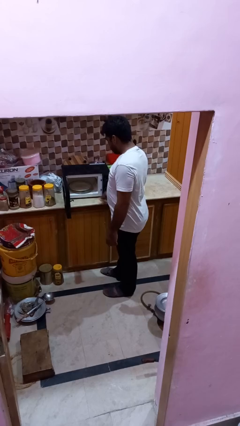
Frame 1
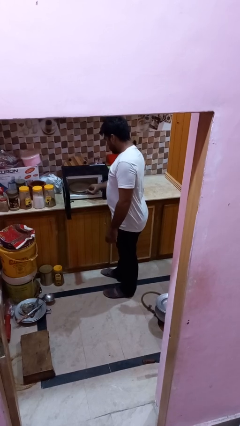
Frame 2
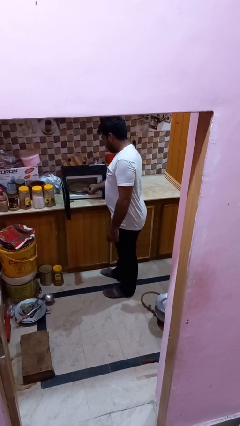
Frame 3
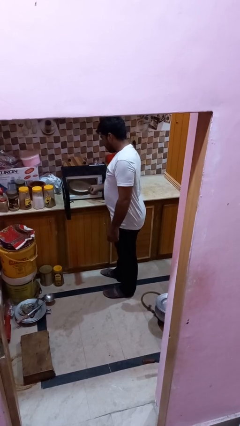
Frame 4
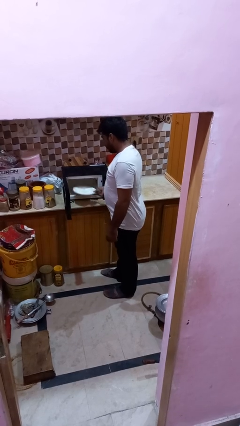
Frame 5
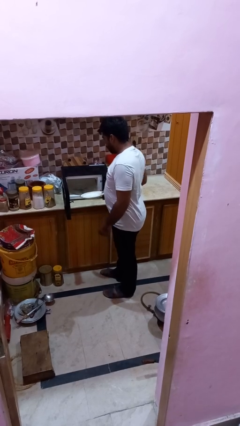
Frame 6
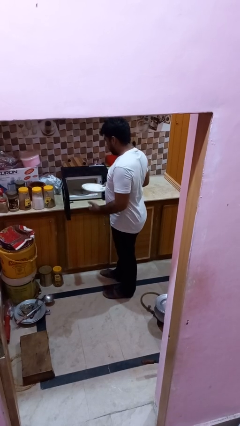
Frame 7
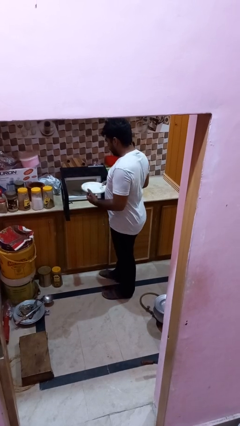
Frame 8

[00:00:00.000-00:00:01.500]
person takes object from oven

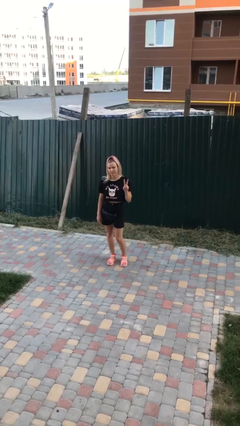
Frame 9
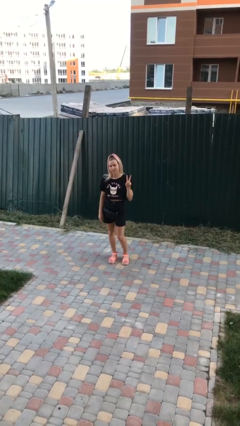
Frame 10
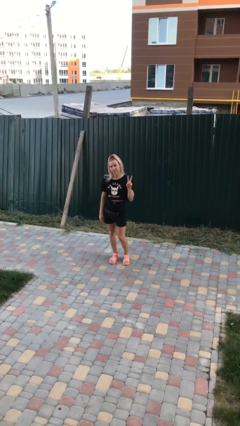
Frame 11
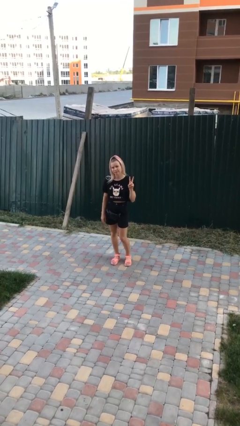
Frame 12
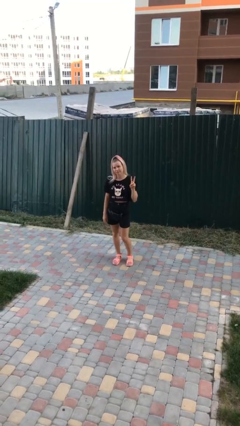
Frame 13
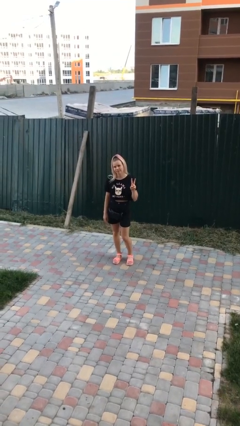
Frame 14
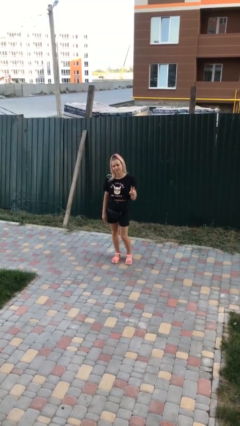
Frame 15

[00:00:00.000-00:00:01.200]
person gestures peace

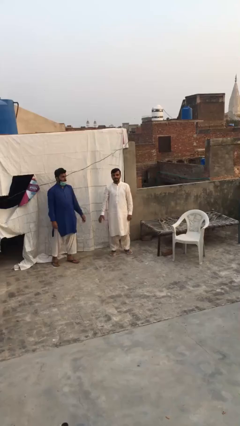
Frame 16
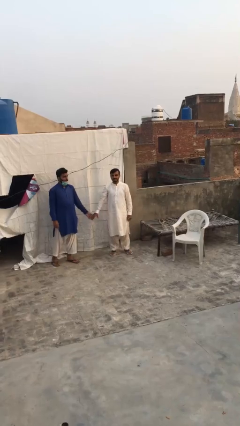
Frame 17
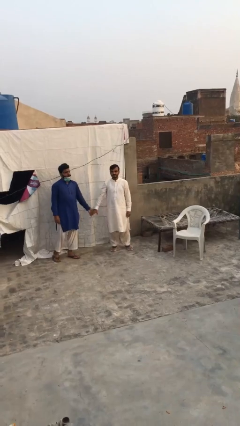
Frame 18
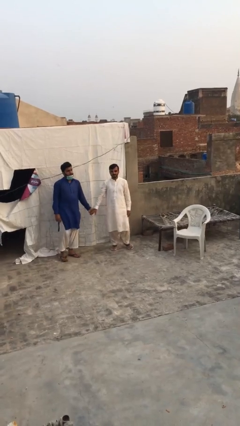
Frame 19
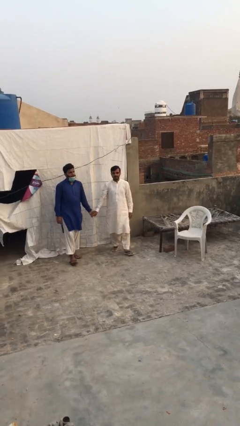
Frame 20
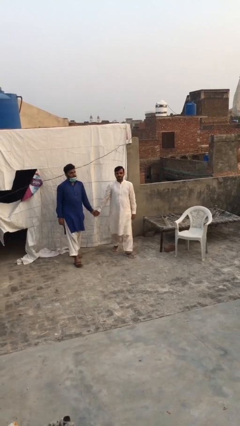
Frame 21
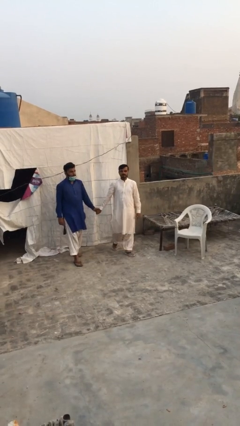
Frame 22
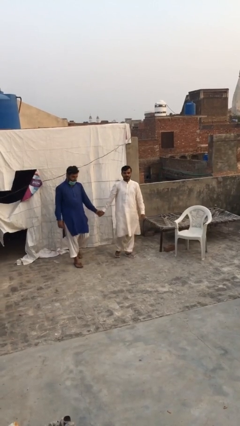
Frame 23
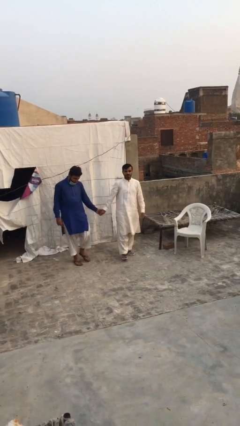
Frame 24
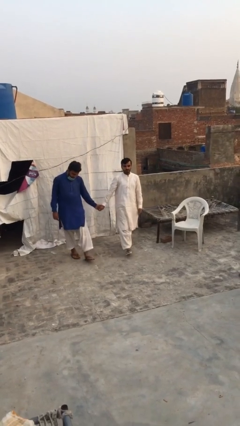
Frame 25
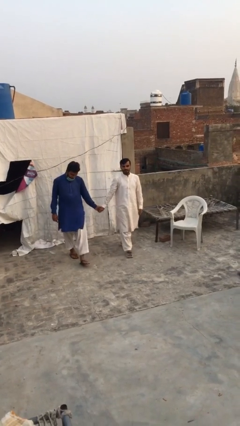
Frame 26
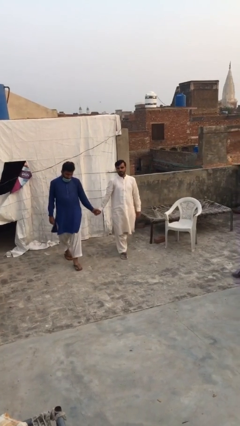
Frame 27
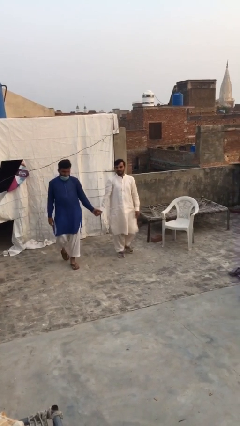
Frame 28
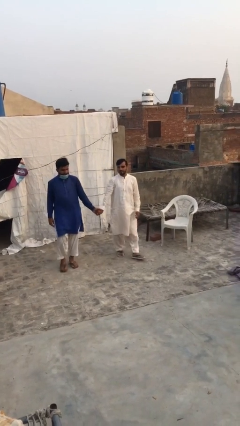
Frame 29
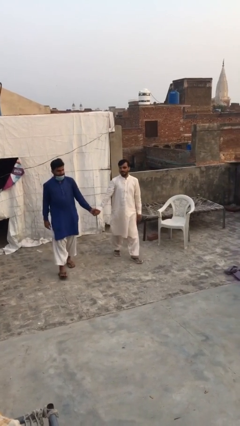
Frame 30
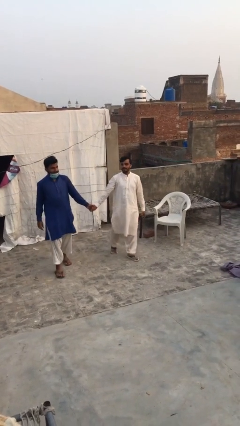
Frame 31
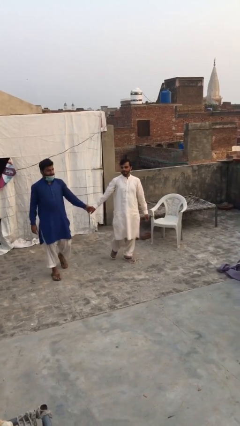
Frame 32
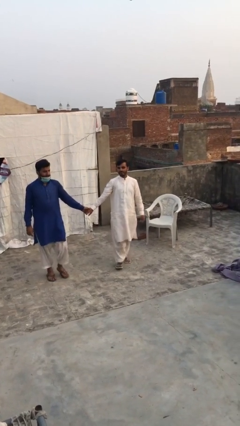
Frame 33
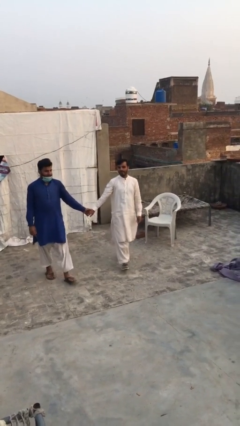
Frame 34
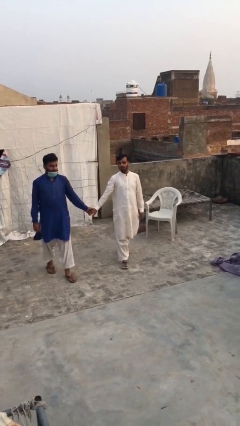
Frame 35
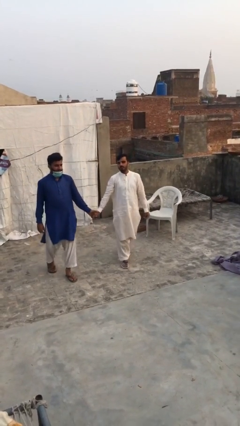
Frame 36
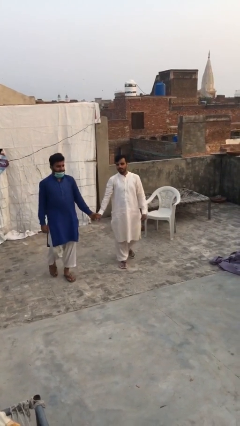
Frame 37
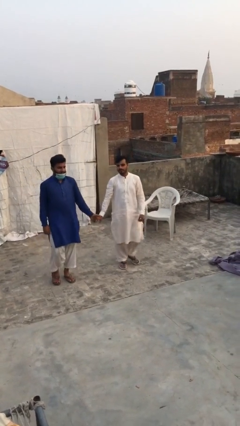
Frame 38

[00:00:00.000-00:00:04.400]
person holds hand

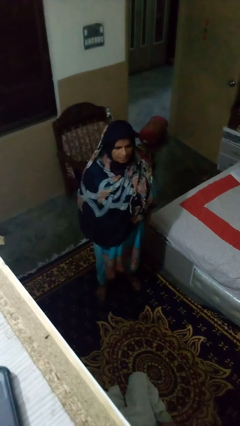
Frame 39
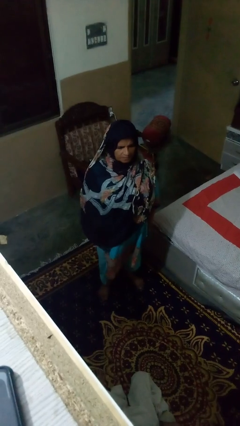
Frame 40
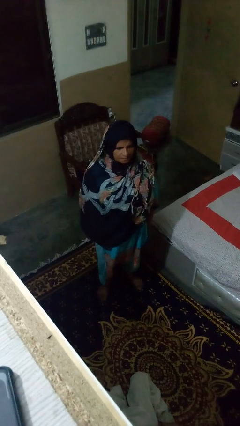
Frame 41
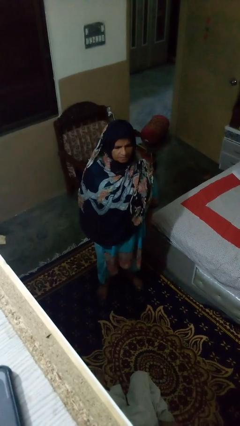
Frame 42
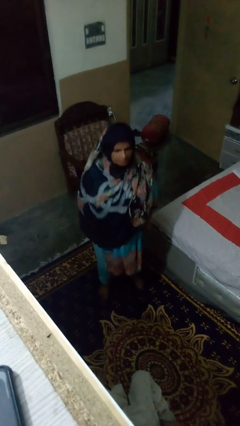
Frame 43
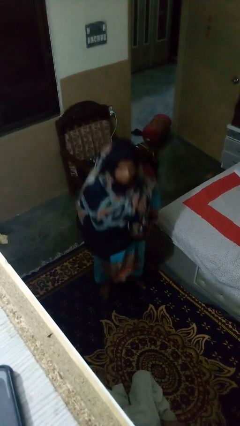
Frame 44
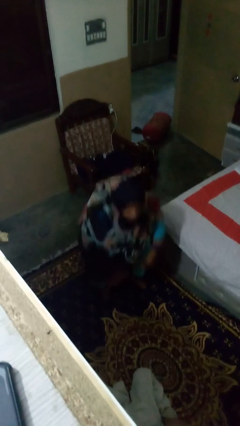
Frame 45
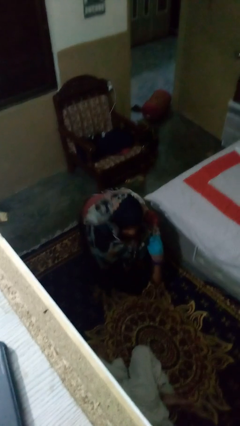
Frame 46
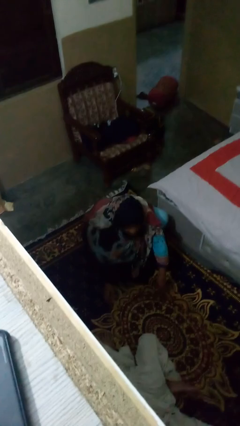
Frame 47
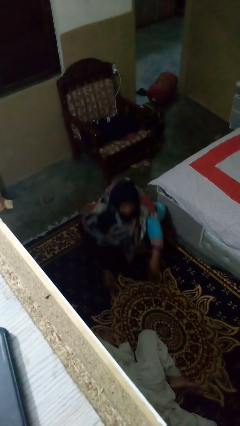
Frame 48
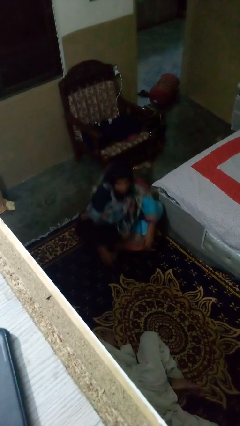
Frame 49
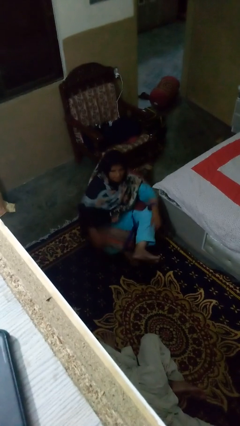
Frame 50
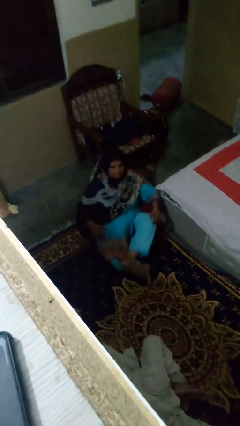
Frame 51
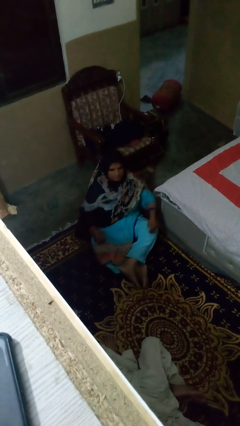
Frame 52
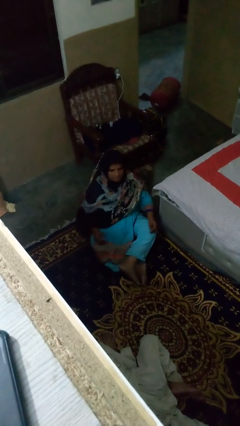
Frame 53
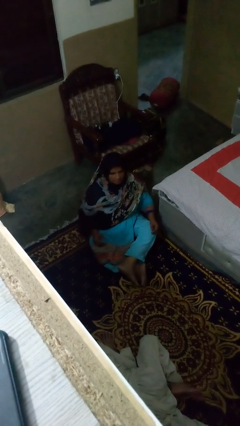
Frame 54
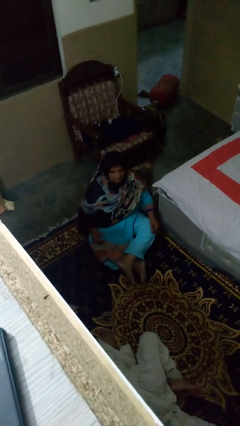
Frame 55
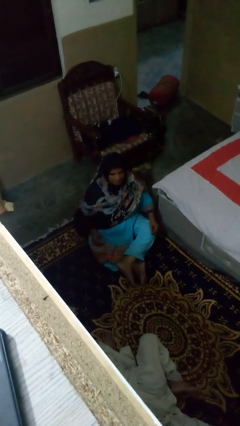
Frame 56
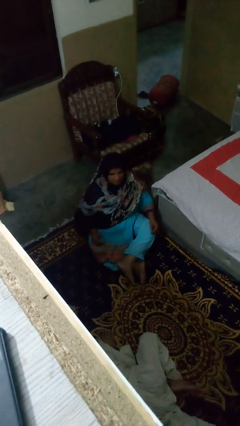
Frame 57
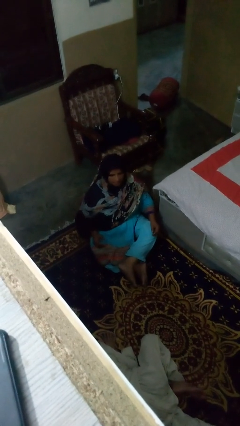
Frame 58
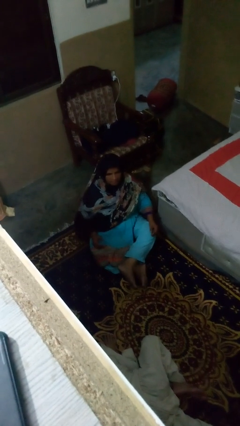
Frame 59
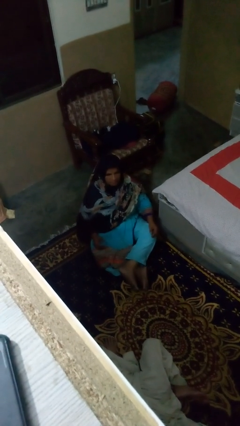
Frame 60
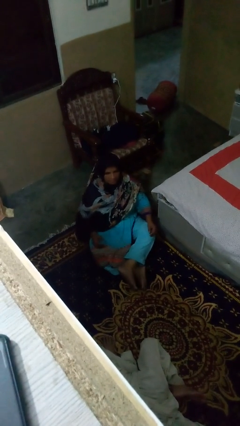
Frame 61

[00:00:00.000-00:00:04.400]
person sits crisscross

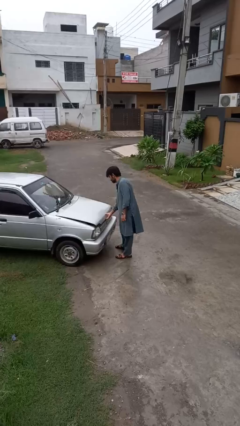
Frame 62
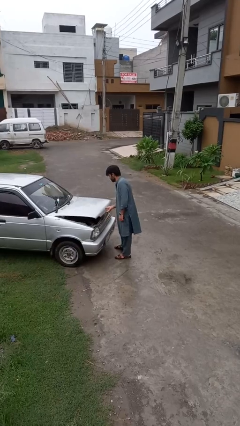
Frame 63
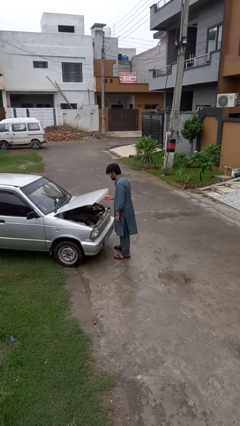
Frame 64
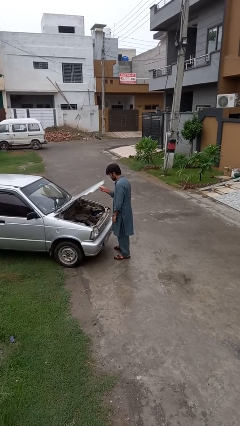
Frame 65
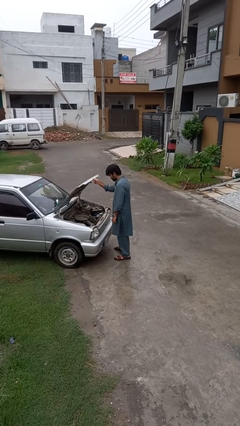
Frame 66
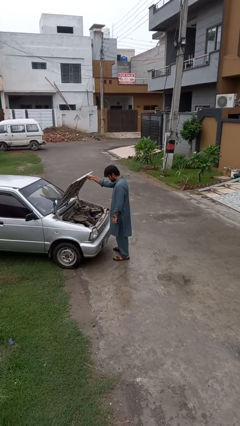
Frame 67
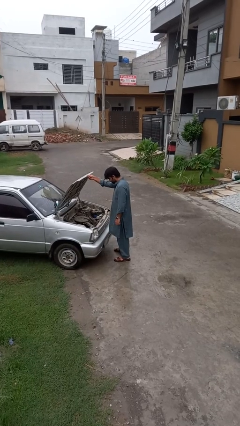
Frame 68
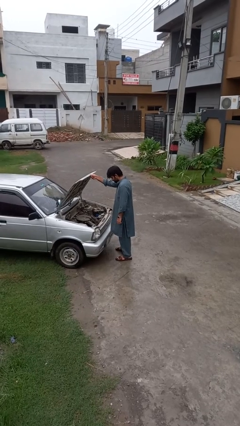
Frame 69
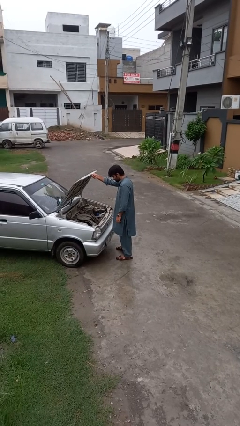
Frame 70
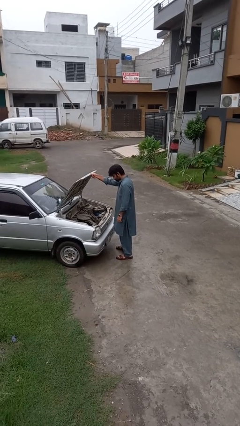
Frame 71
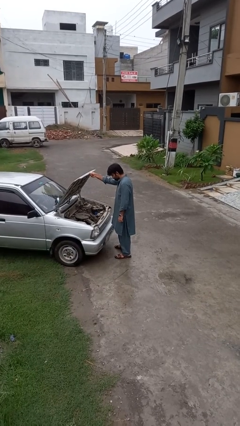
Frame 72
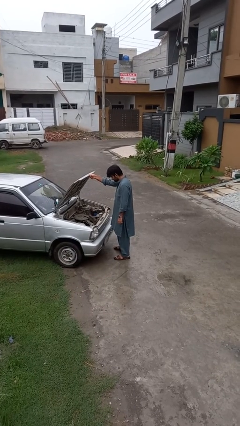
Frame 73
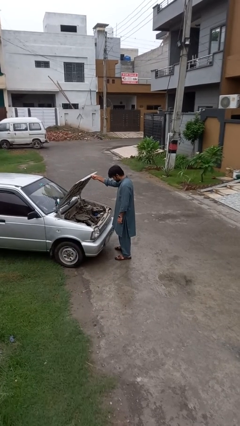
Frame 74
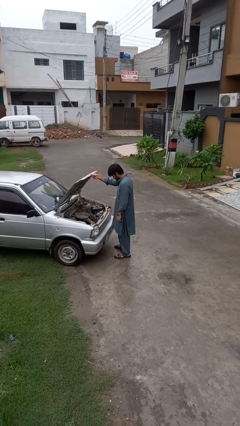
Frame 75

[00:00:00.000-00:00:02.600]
person opens car hood

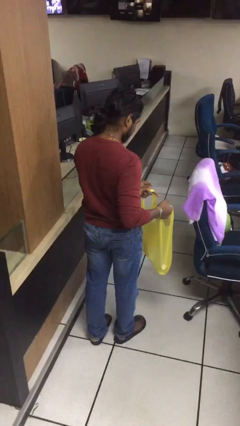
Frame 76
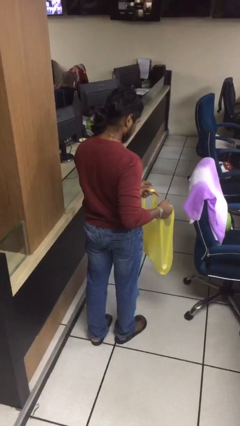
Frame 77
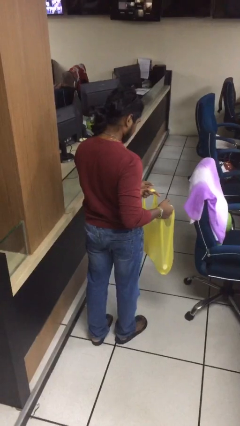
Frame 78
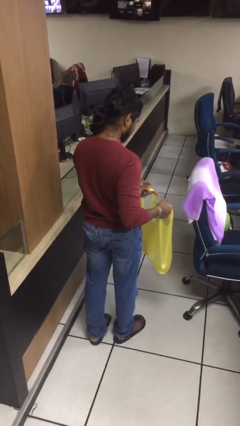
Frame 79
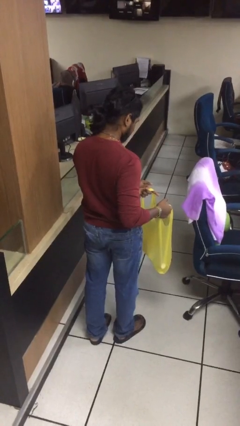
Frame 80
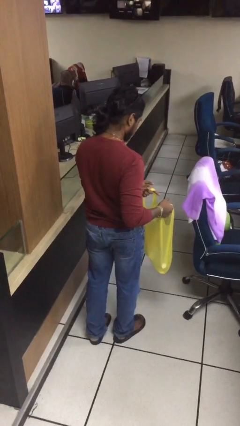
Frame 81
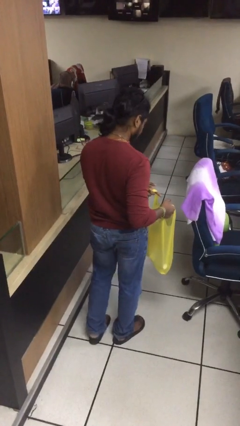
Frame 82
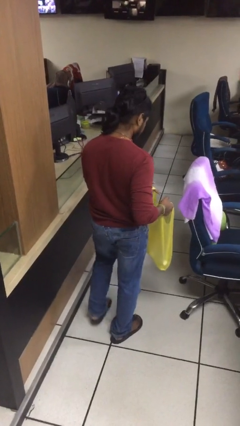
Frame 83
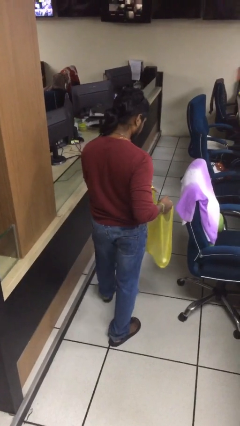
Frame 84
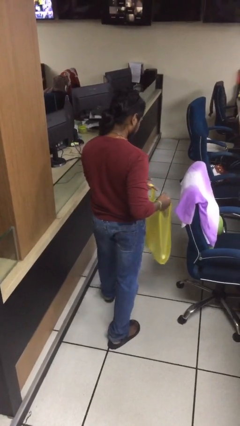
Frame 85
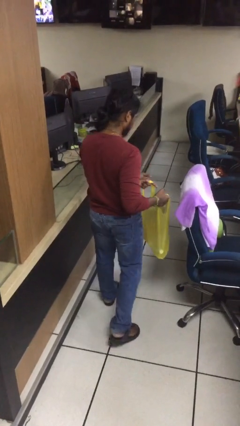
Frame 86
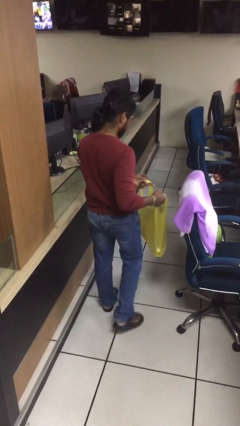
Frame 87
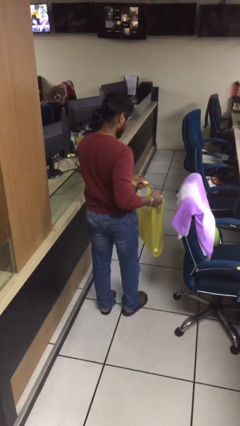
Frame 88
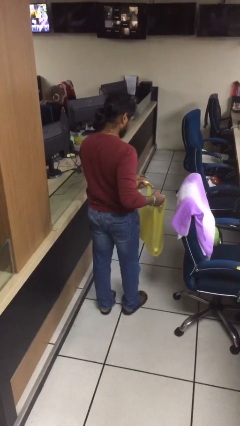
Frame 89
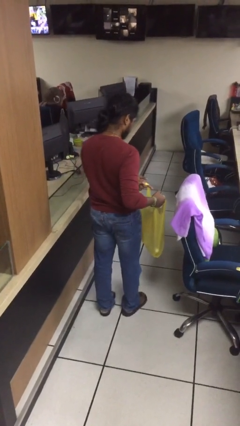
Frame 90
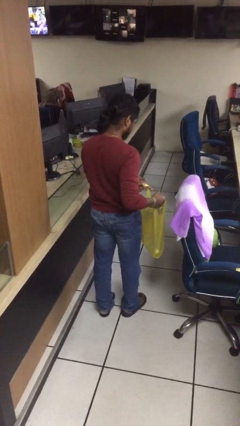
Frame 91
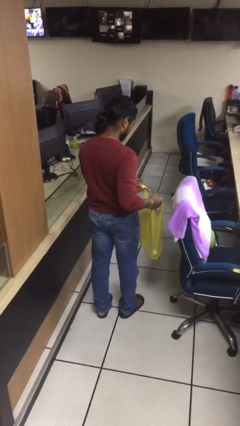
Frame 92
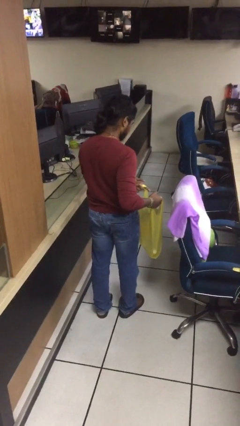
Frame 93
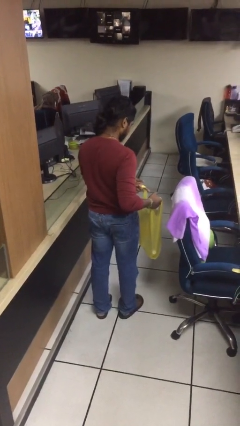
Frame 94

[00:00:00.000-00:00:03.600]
person carries groceries
